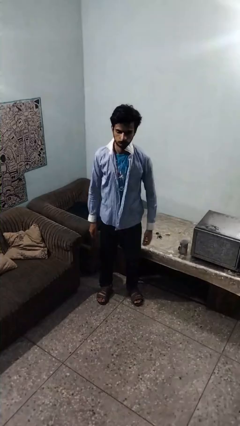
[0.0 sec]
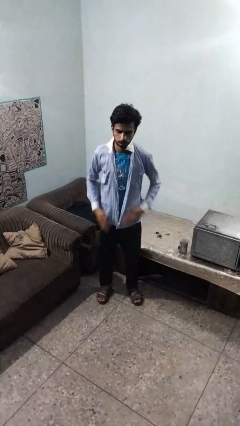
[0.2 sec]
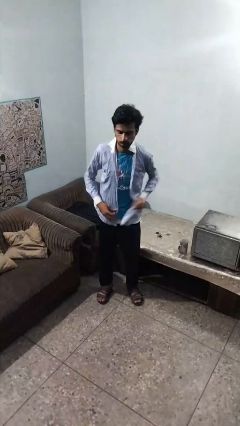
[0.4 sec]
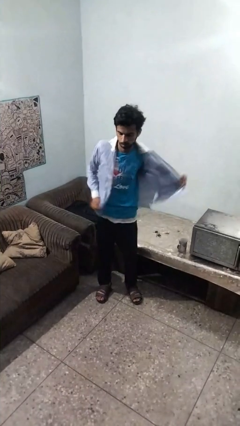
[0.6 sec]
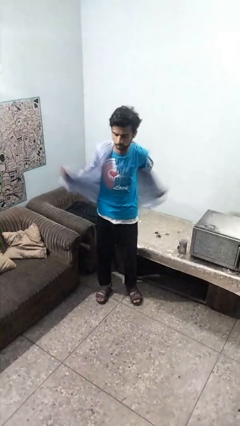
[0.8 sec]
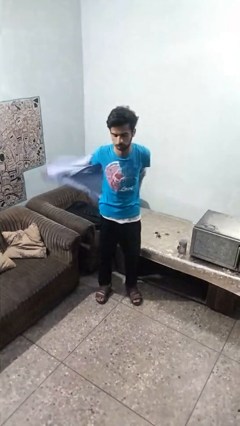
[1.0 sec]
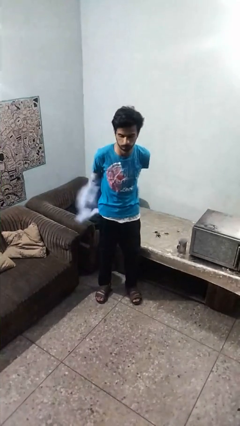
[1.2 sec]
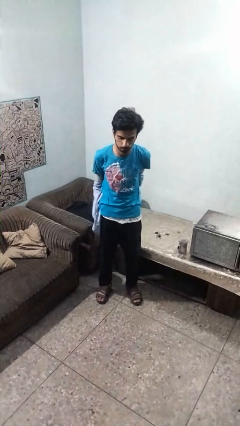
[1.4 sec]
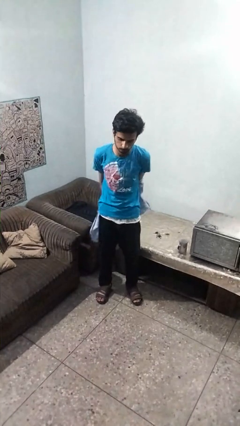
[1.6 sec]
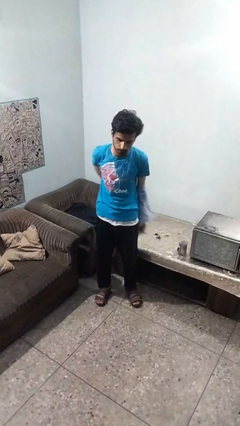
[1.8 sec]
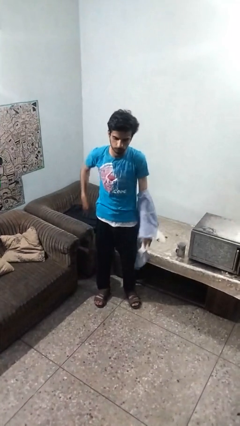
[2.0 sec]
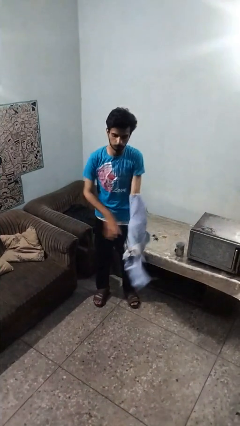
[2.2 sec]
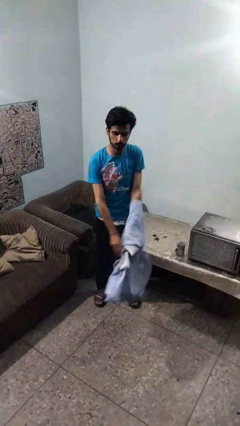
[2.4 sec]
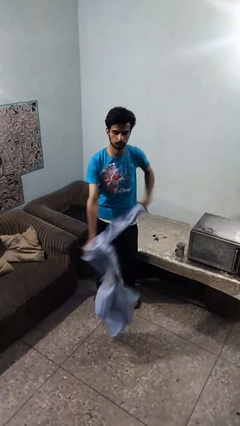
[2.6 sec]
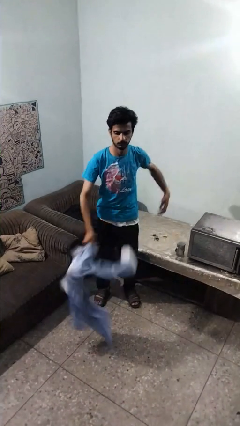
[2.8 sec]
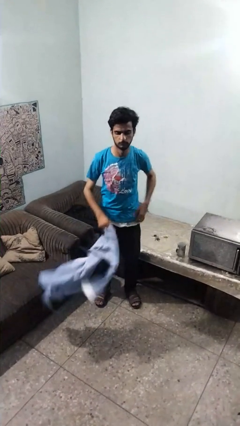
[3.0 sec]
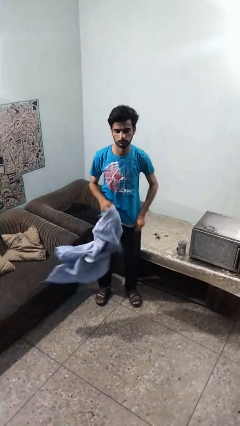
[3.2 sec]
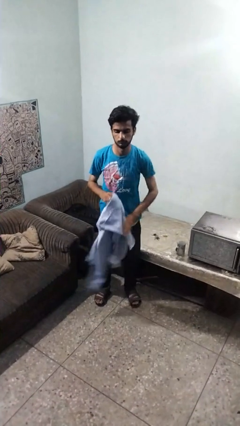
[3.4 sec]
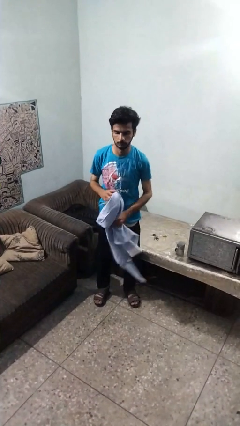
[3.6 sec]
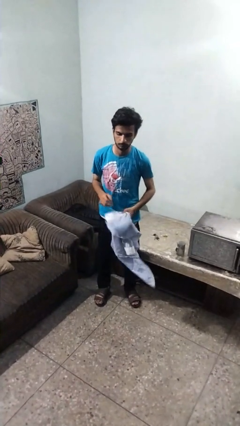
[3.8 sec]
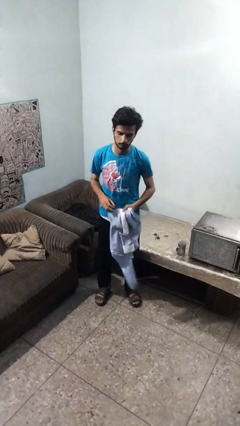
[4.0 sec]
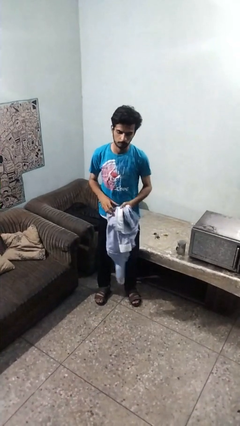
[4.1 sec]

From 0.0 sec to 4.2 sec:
person takes off shirt

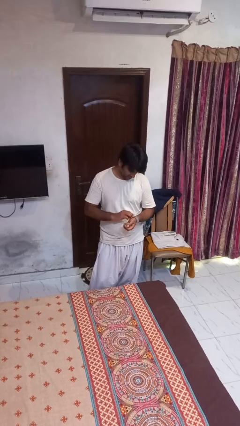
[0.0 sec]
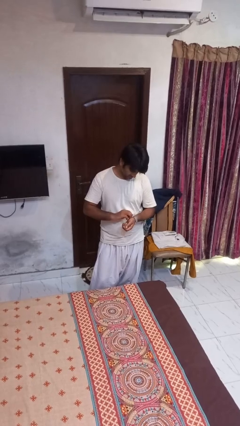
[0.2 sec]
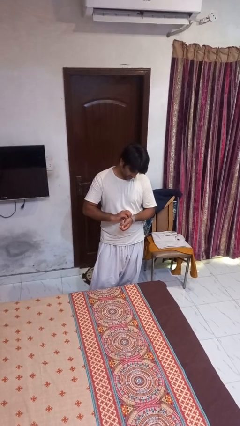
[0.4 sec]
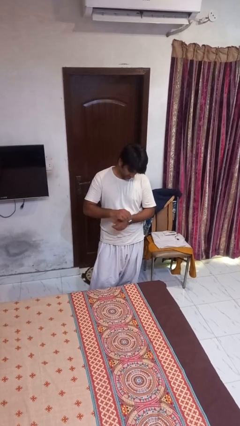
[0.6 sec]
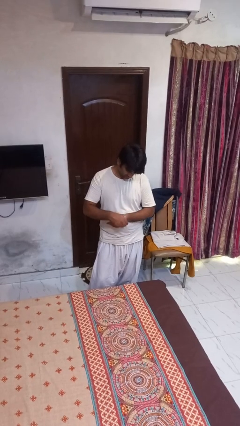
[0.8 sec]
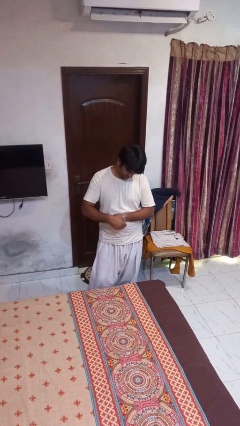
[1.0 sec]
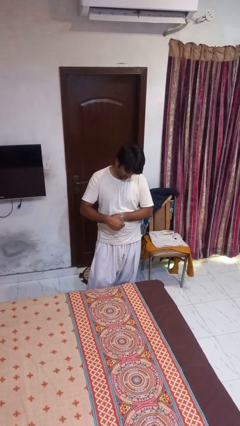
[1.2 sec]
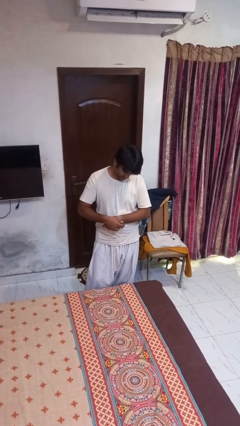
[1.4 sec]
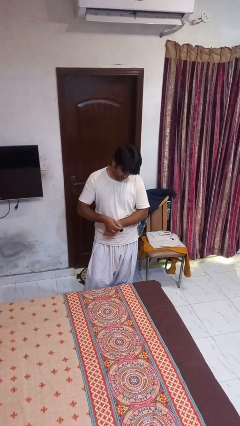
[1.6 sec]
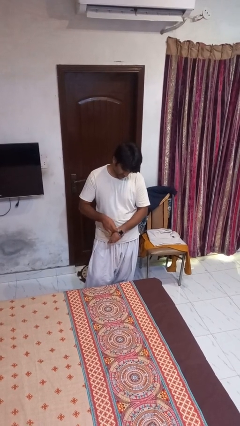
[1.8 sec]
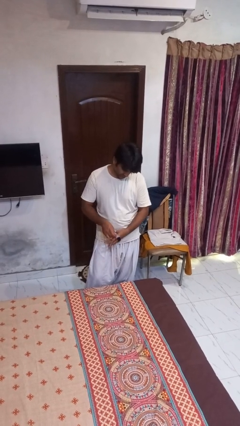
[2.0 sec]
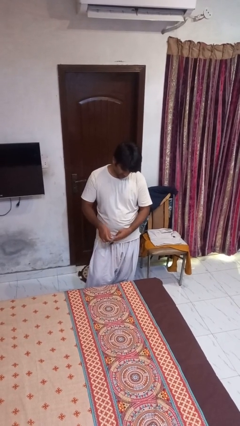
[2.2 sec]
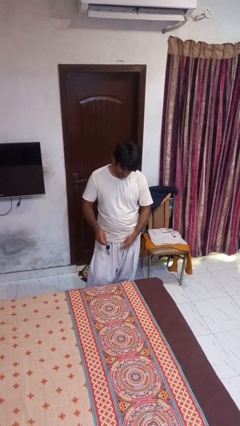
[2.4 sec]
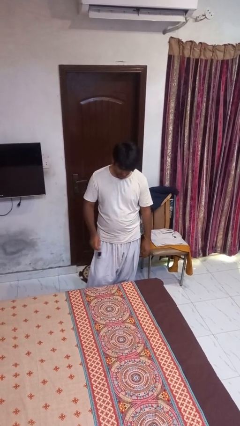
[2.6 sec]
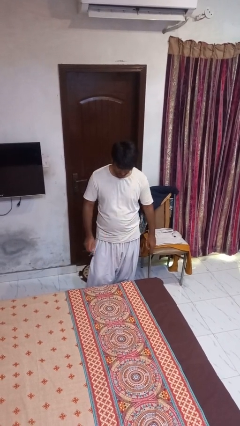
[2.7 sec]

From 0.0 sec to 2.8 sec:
person takes off wristwatch

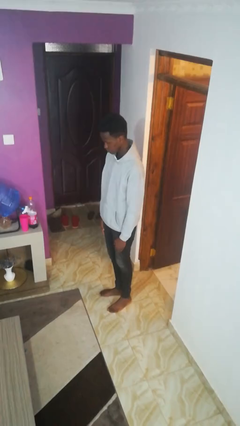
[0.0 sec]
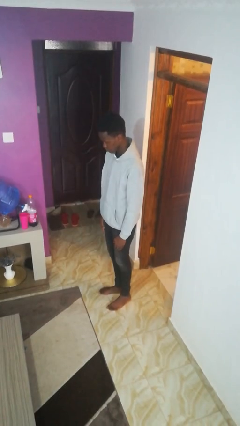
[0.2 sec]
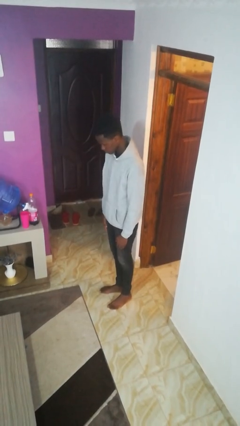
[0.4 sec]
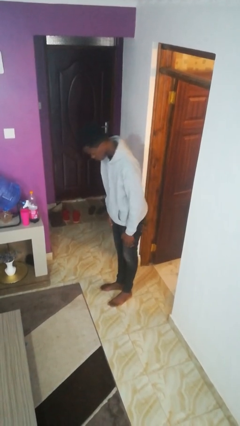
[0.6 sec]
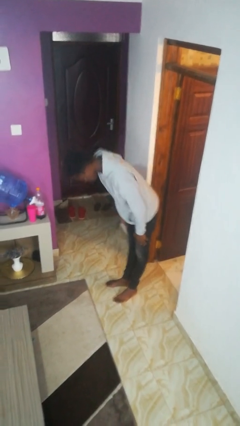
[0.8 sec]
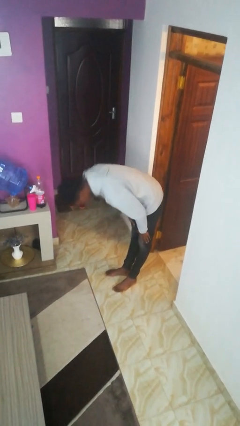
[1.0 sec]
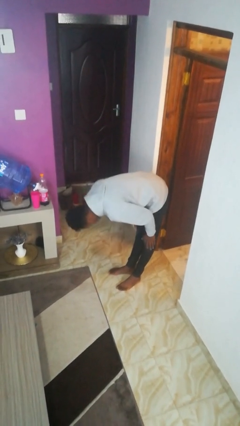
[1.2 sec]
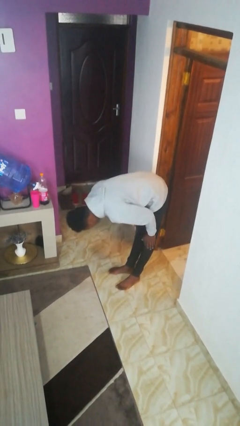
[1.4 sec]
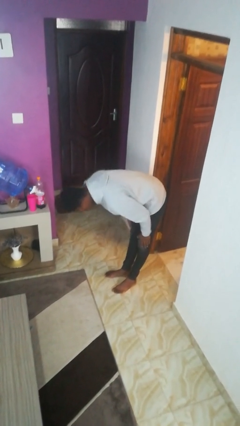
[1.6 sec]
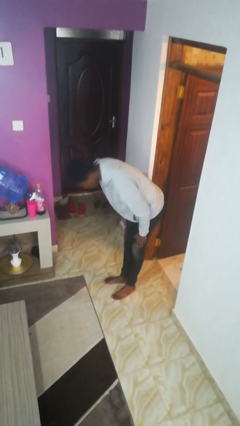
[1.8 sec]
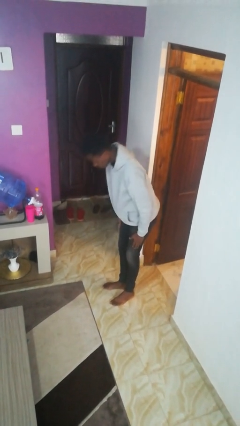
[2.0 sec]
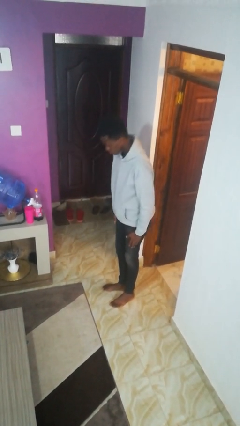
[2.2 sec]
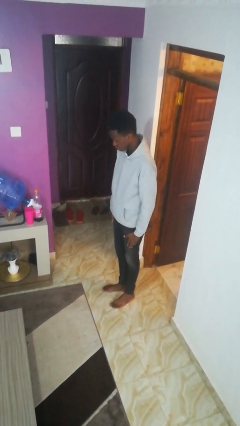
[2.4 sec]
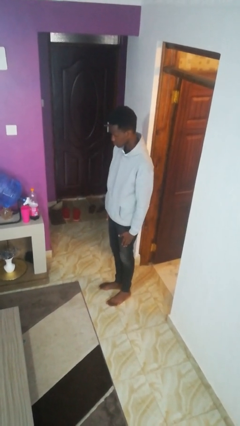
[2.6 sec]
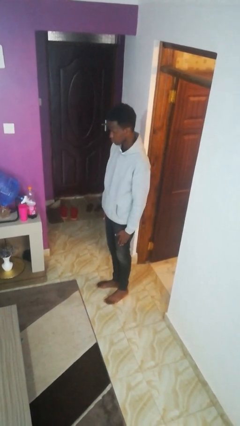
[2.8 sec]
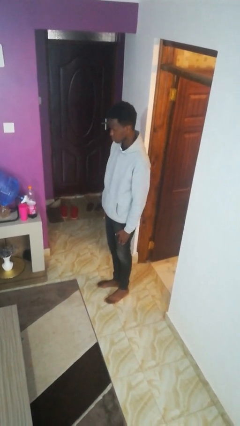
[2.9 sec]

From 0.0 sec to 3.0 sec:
person bows

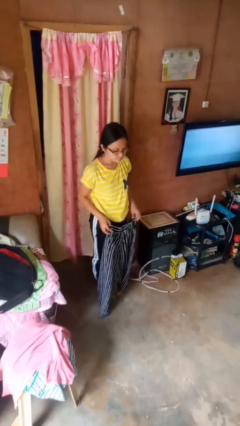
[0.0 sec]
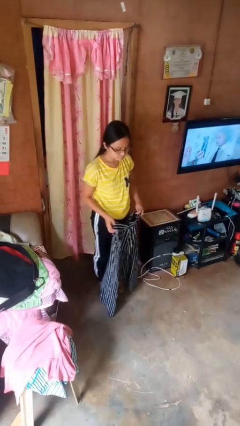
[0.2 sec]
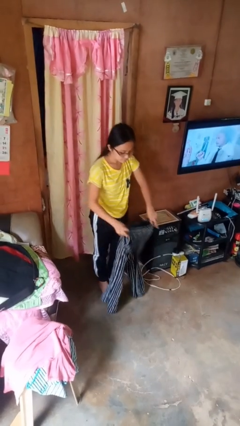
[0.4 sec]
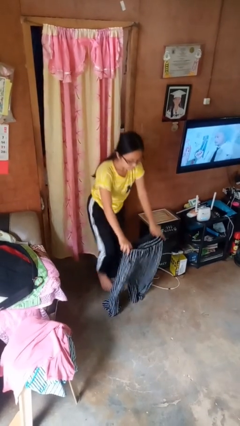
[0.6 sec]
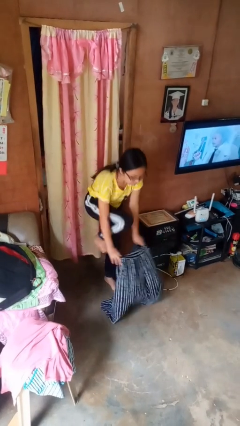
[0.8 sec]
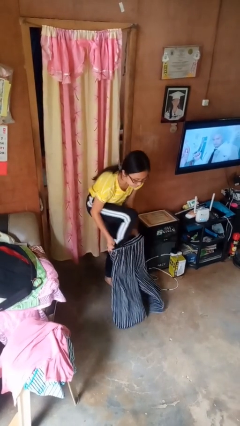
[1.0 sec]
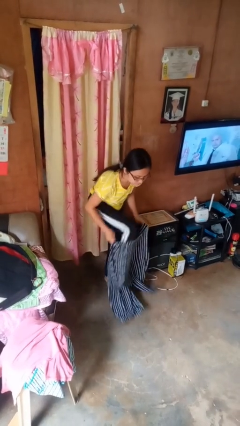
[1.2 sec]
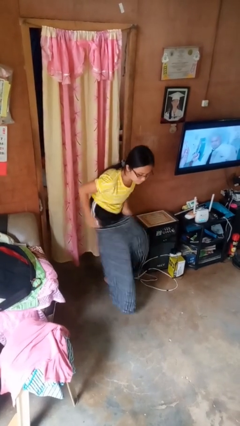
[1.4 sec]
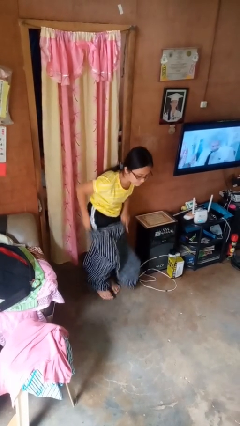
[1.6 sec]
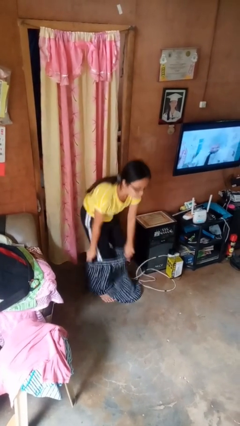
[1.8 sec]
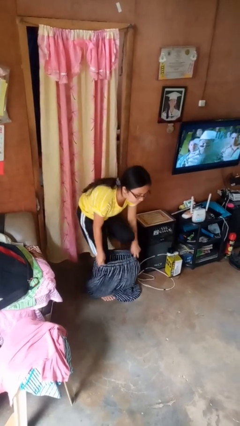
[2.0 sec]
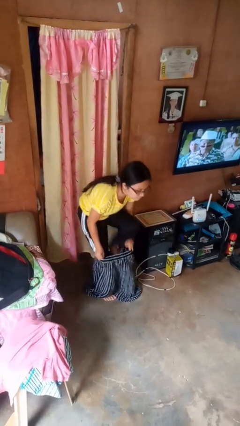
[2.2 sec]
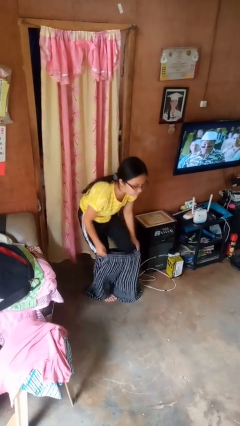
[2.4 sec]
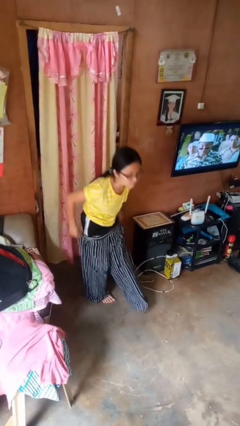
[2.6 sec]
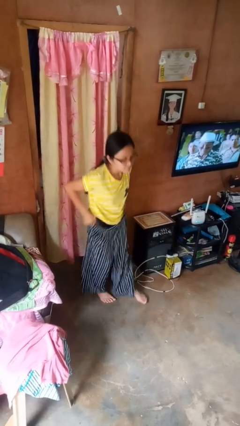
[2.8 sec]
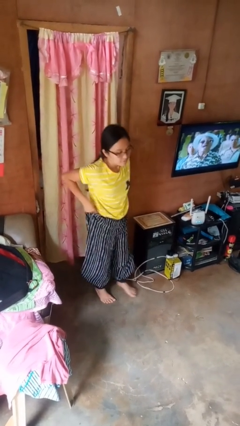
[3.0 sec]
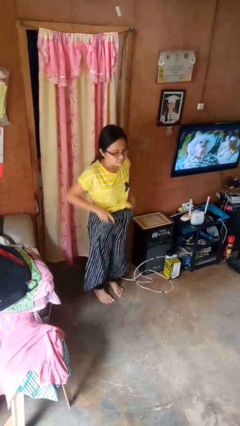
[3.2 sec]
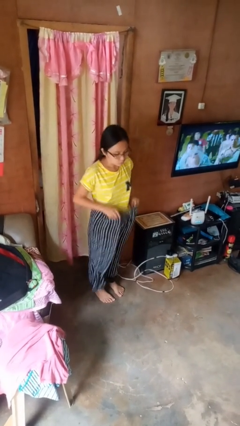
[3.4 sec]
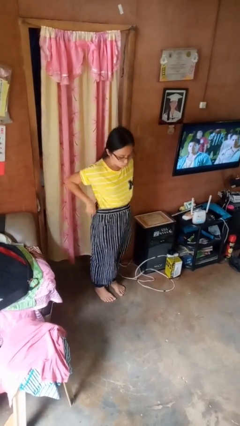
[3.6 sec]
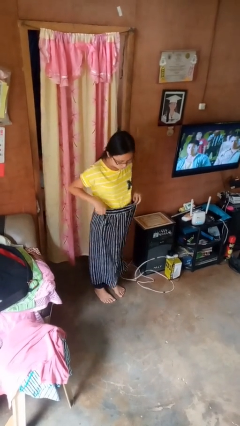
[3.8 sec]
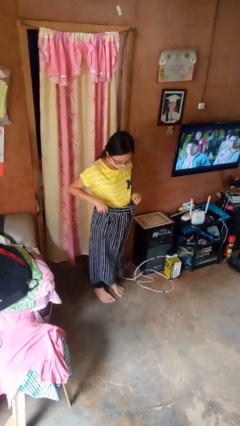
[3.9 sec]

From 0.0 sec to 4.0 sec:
person puts on pants

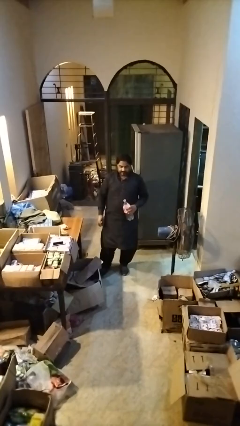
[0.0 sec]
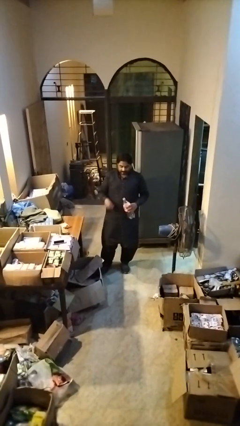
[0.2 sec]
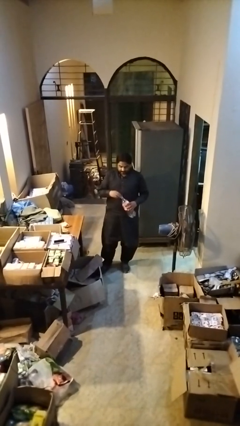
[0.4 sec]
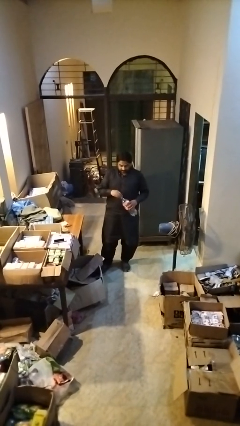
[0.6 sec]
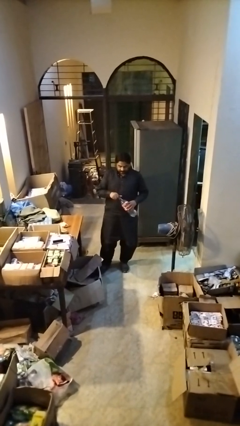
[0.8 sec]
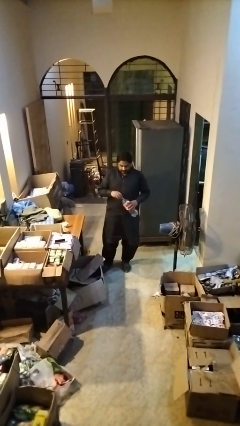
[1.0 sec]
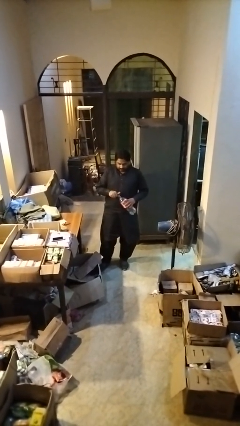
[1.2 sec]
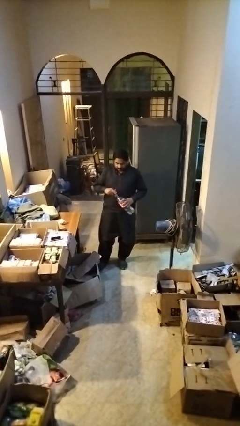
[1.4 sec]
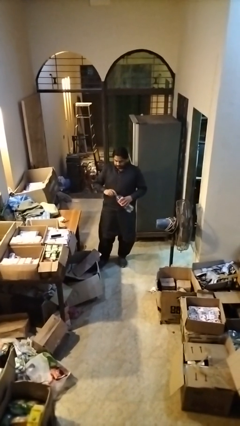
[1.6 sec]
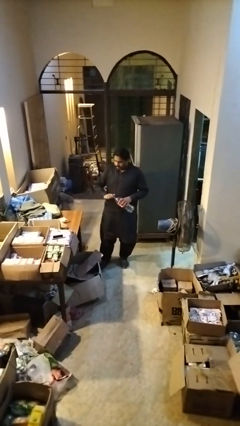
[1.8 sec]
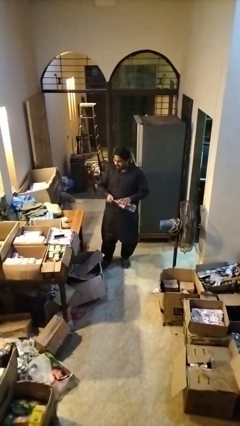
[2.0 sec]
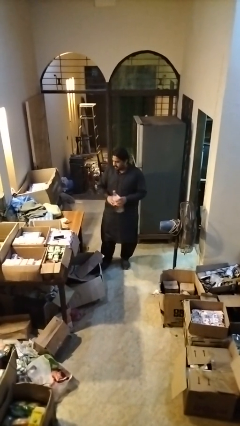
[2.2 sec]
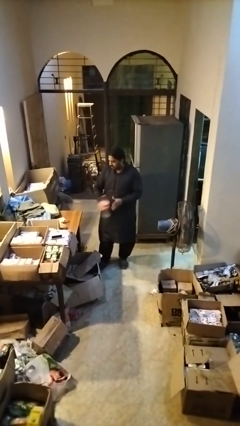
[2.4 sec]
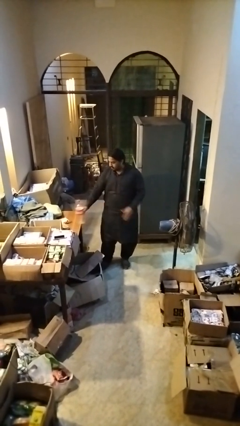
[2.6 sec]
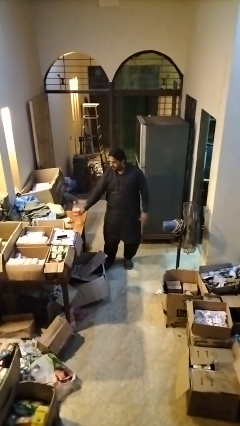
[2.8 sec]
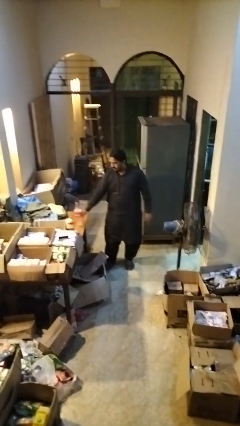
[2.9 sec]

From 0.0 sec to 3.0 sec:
person screws lid to bottle

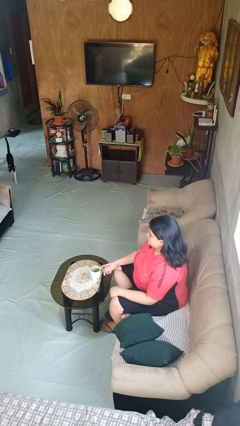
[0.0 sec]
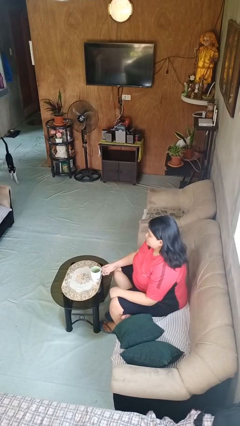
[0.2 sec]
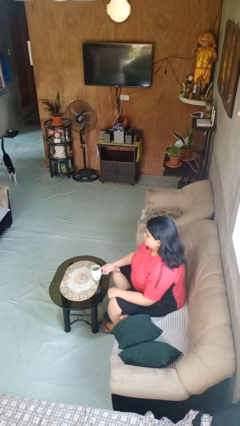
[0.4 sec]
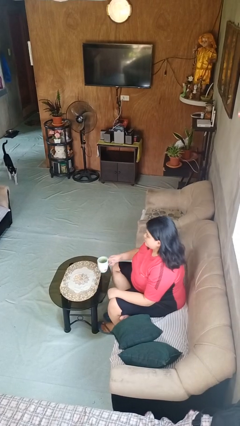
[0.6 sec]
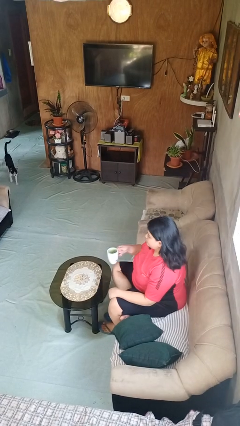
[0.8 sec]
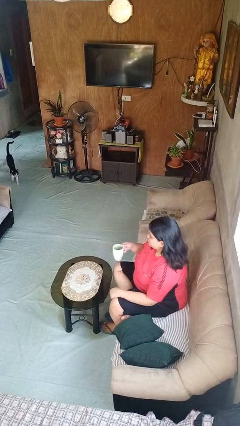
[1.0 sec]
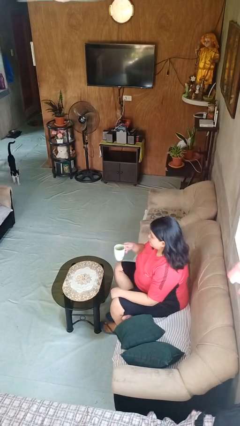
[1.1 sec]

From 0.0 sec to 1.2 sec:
person picks up object from table
